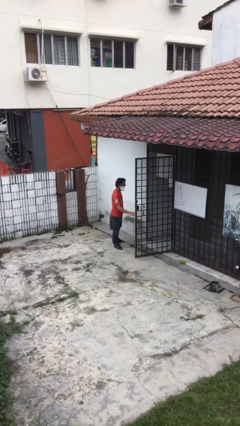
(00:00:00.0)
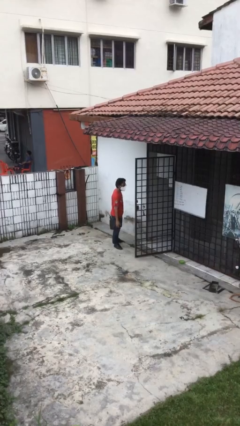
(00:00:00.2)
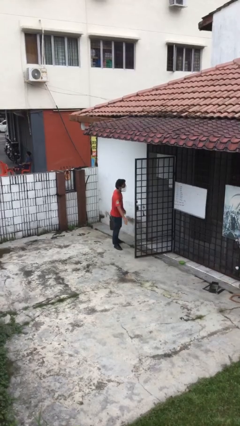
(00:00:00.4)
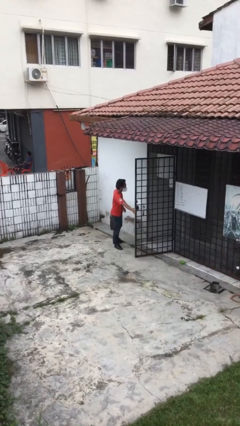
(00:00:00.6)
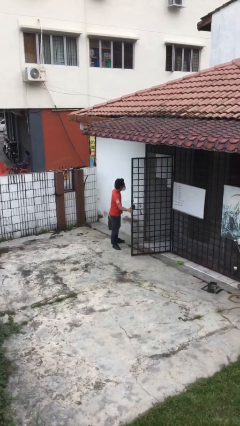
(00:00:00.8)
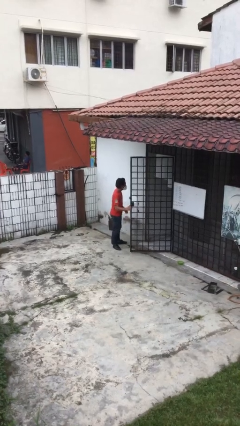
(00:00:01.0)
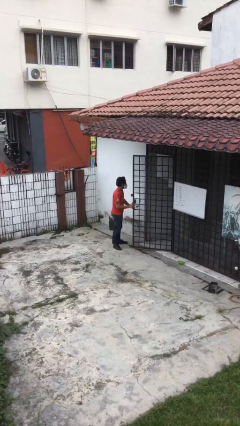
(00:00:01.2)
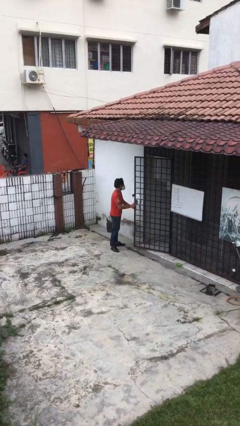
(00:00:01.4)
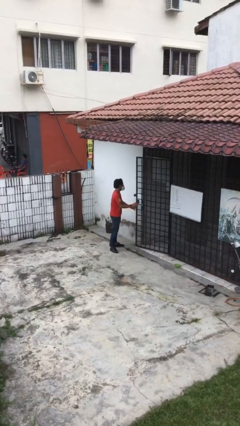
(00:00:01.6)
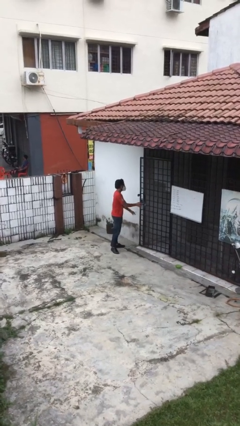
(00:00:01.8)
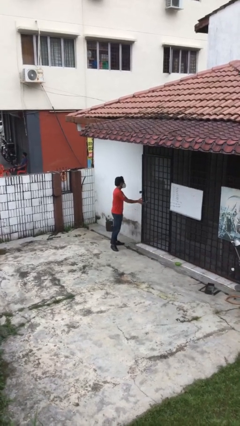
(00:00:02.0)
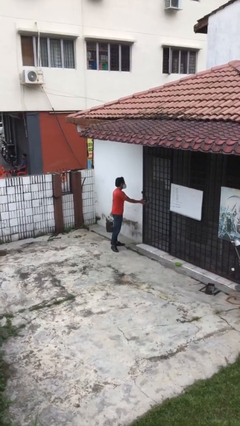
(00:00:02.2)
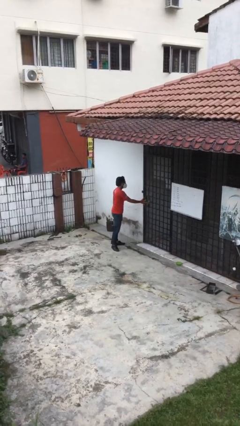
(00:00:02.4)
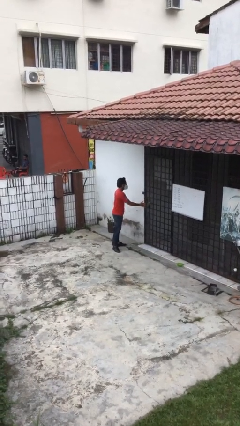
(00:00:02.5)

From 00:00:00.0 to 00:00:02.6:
person closes facility door

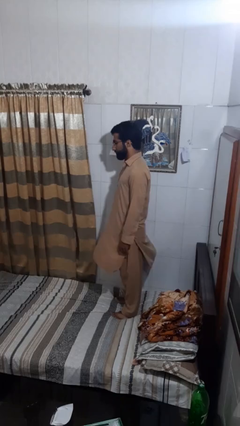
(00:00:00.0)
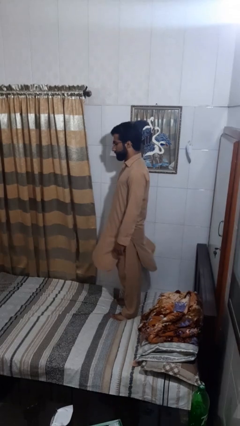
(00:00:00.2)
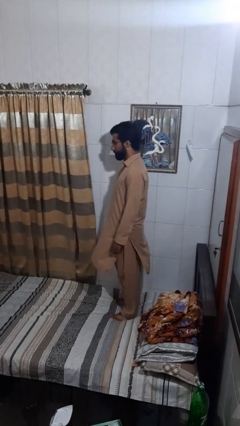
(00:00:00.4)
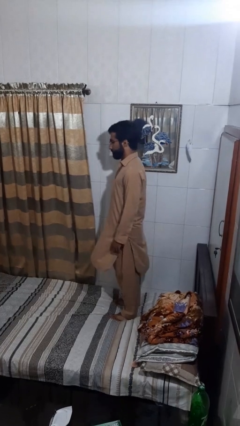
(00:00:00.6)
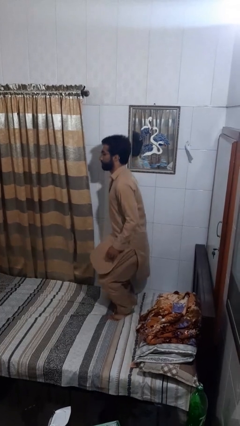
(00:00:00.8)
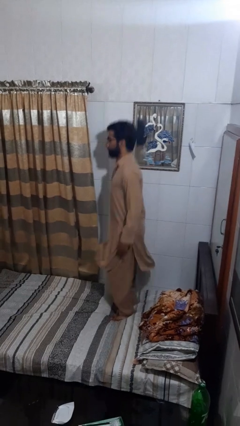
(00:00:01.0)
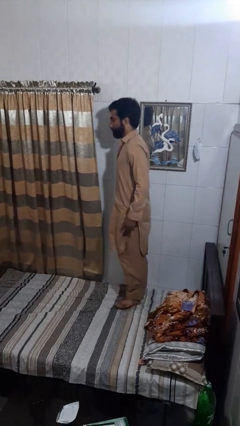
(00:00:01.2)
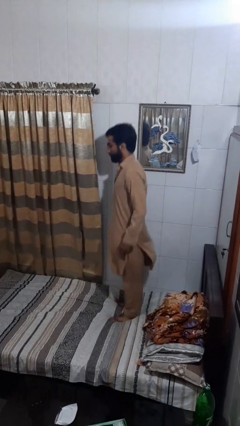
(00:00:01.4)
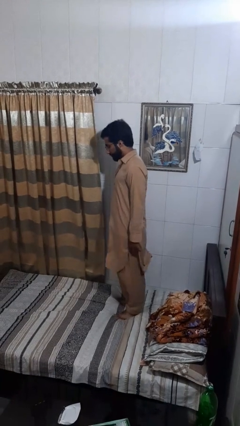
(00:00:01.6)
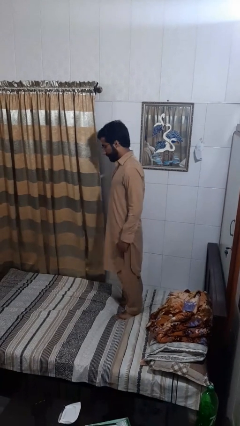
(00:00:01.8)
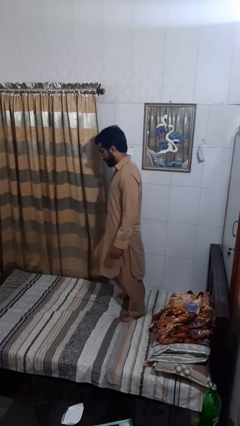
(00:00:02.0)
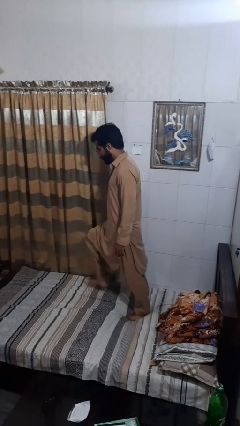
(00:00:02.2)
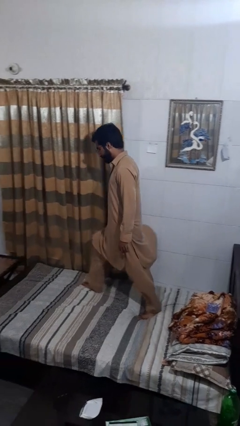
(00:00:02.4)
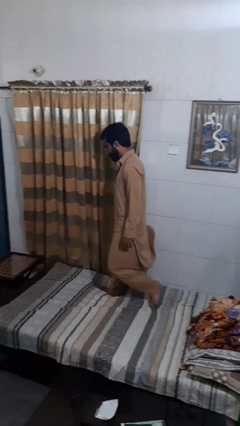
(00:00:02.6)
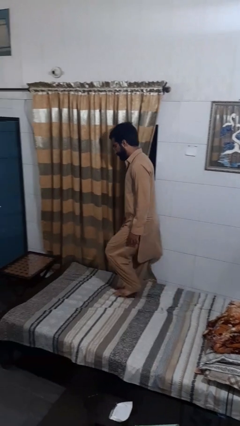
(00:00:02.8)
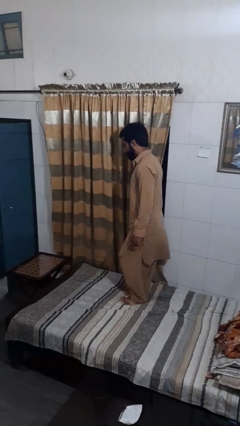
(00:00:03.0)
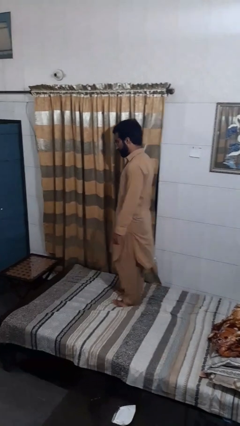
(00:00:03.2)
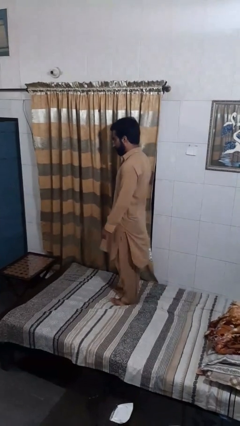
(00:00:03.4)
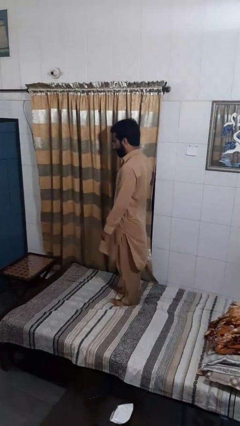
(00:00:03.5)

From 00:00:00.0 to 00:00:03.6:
person jumps on bed

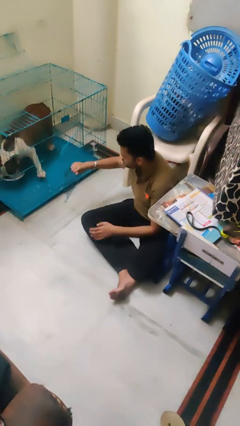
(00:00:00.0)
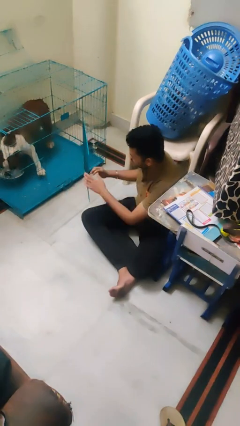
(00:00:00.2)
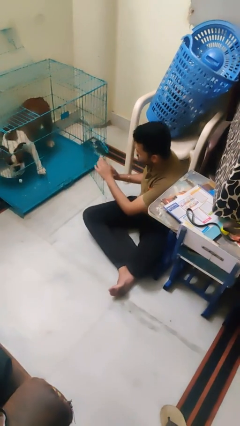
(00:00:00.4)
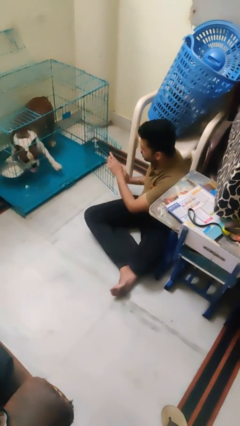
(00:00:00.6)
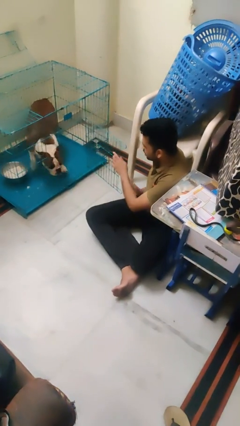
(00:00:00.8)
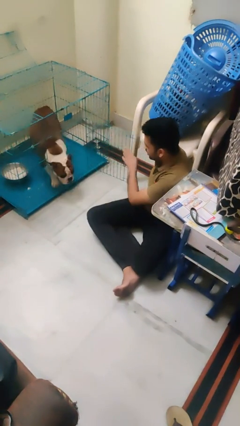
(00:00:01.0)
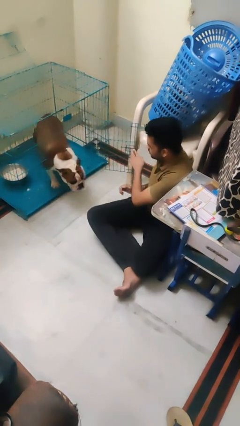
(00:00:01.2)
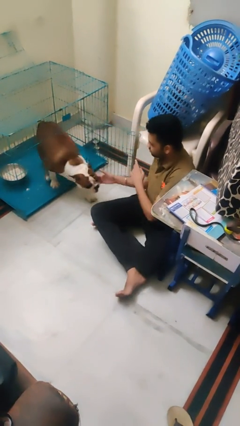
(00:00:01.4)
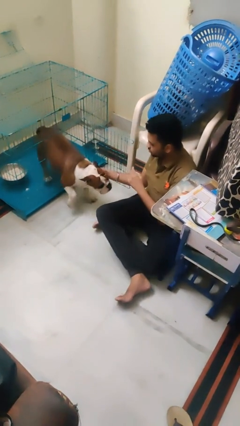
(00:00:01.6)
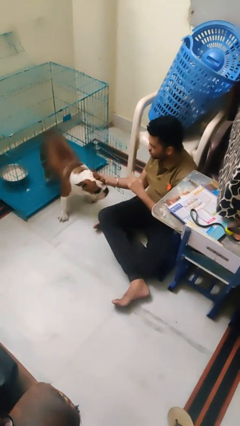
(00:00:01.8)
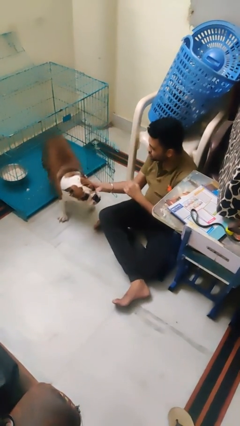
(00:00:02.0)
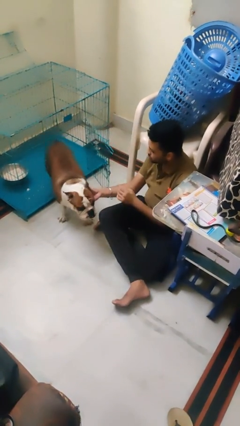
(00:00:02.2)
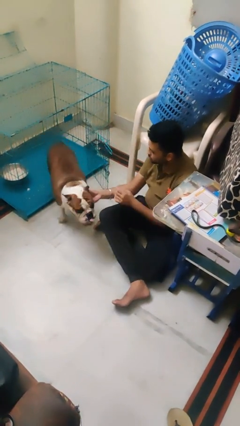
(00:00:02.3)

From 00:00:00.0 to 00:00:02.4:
person uncrates dog

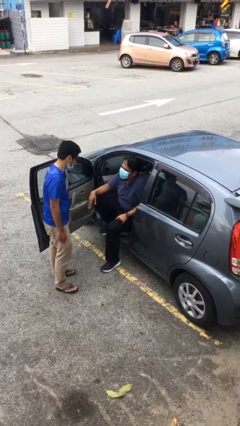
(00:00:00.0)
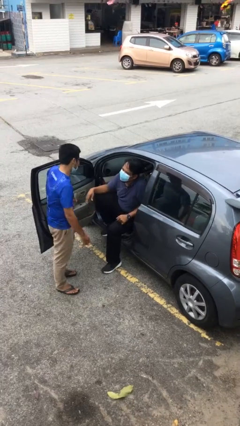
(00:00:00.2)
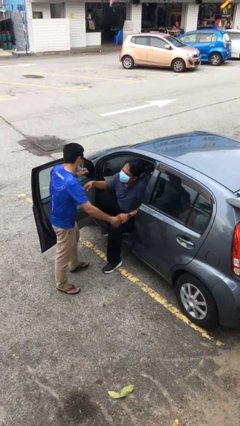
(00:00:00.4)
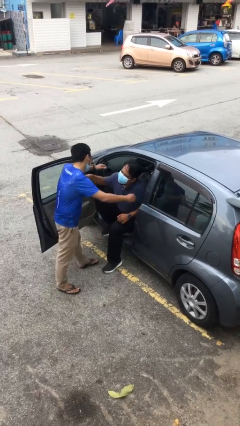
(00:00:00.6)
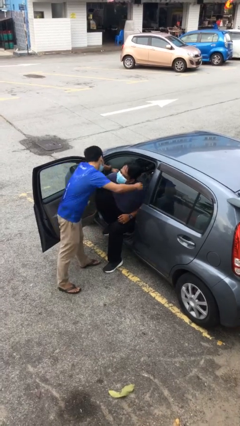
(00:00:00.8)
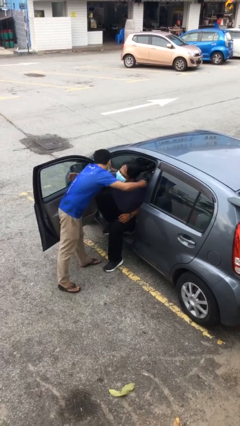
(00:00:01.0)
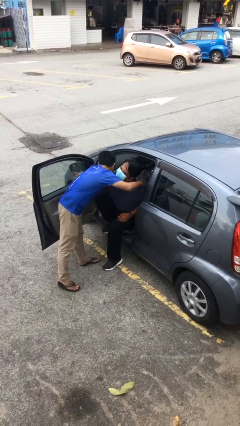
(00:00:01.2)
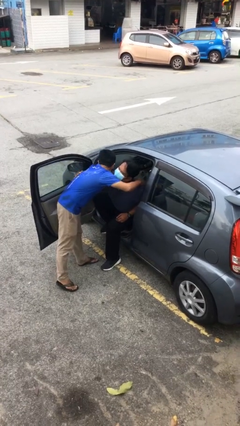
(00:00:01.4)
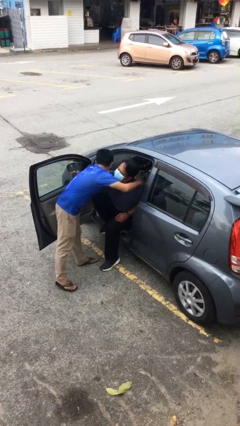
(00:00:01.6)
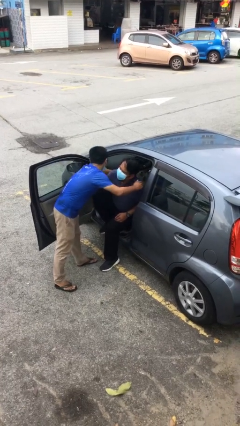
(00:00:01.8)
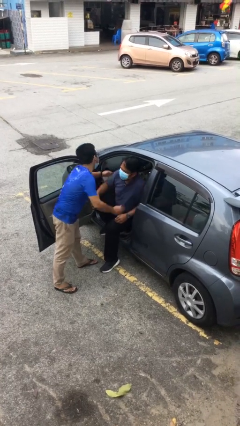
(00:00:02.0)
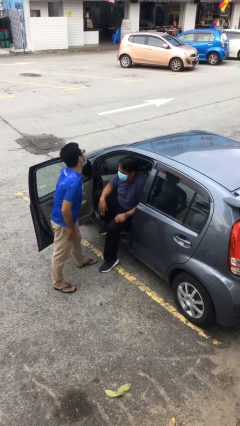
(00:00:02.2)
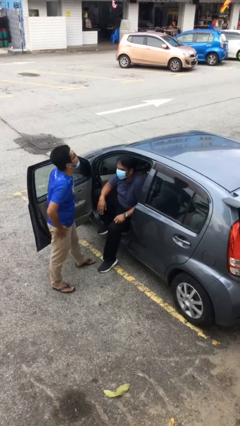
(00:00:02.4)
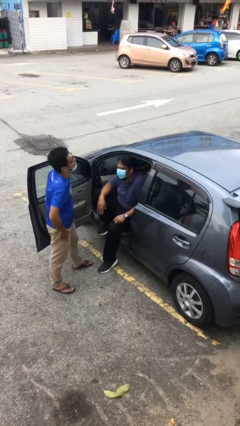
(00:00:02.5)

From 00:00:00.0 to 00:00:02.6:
person embraces person

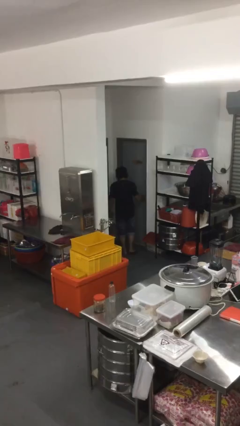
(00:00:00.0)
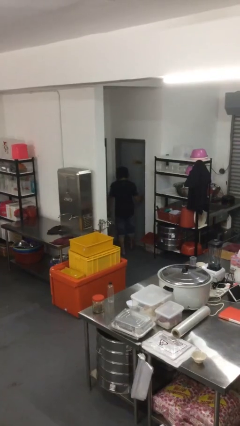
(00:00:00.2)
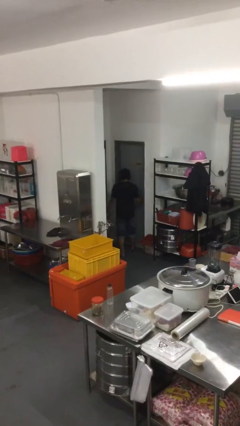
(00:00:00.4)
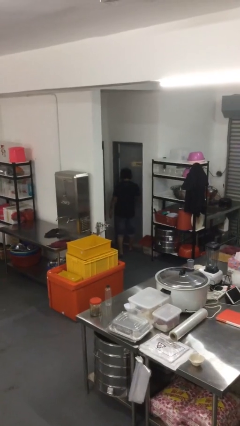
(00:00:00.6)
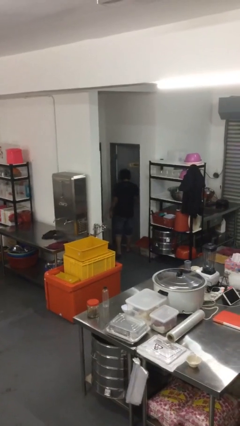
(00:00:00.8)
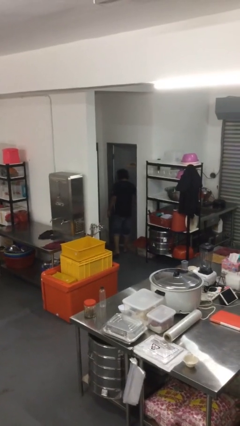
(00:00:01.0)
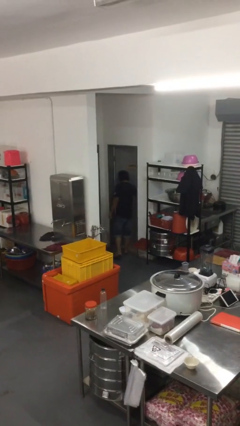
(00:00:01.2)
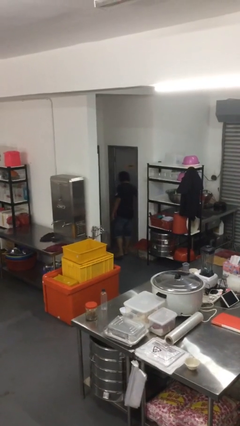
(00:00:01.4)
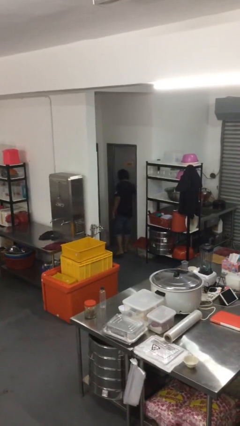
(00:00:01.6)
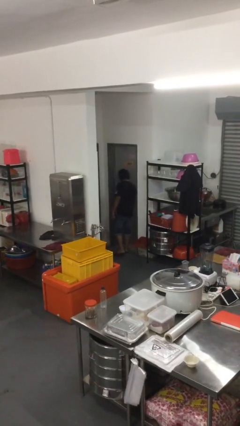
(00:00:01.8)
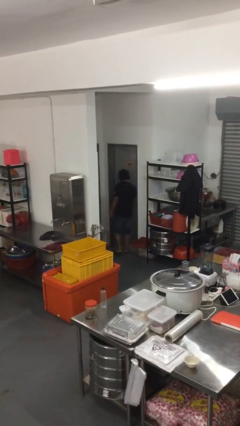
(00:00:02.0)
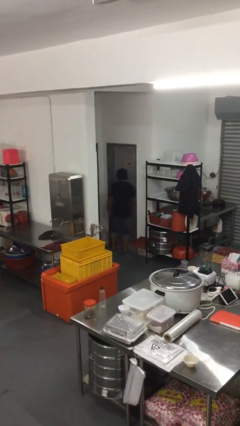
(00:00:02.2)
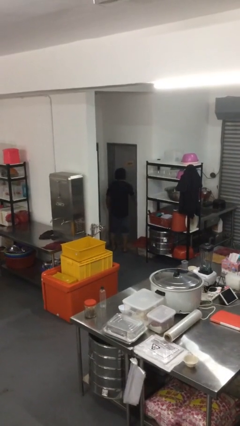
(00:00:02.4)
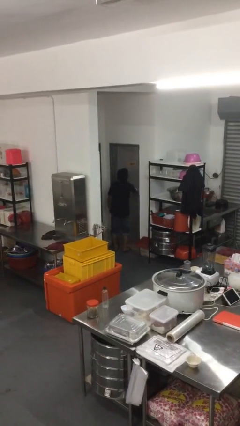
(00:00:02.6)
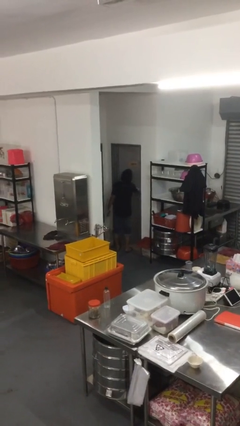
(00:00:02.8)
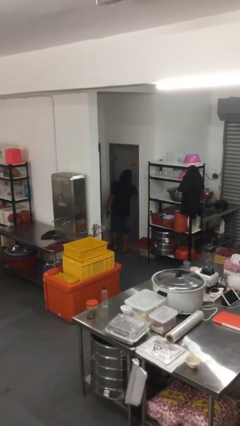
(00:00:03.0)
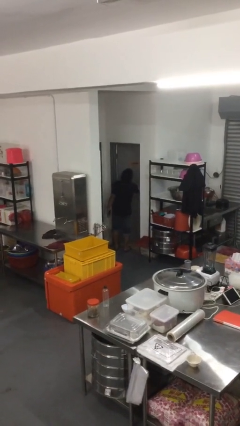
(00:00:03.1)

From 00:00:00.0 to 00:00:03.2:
person opens facility door

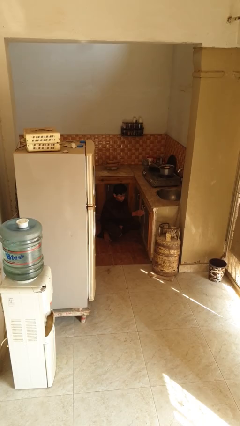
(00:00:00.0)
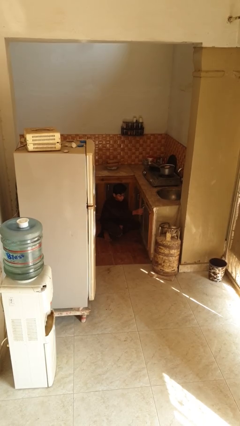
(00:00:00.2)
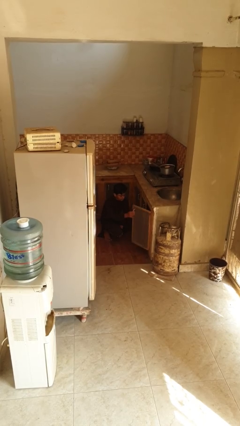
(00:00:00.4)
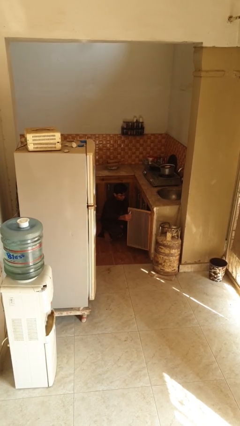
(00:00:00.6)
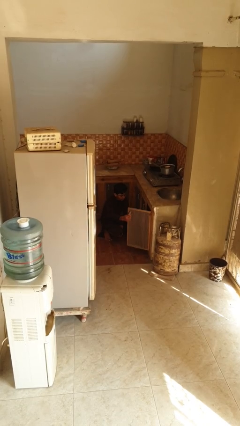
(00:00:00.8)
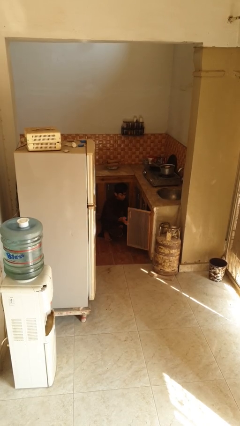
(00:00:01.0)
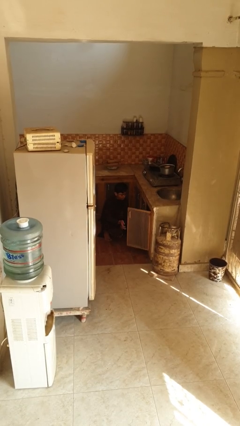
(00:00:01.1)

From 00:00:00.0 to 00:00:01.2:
person opens kitchen drawer

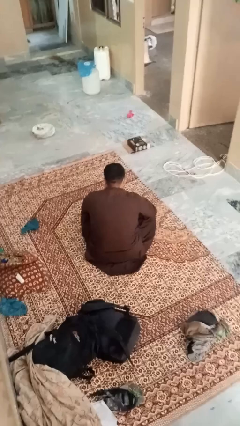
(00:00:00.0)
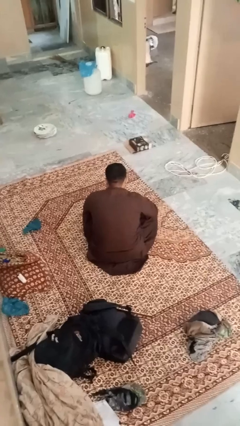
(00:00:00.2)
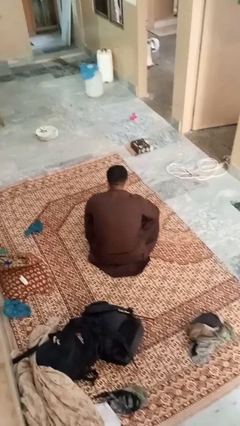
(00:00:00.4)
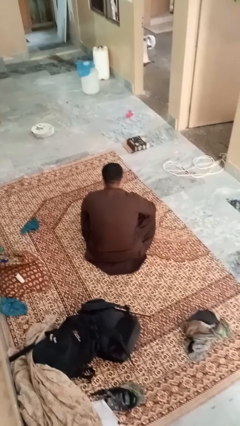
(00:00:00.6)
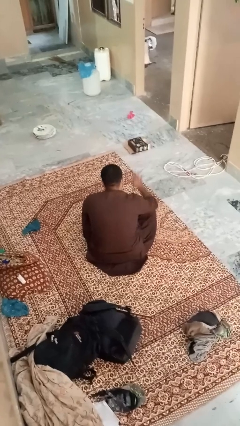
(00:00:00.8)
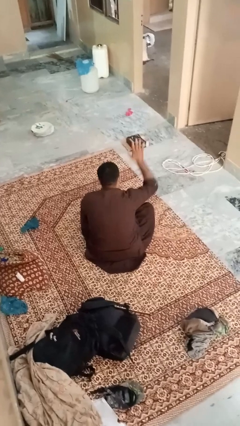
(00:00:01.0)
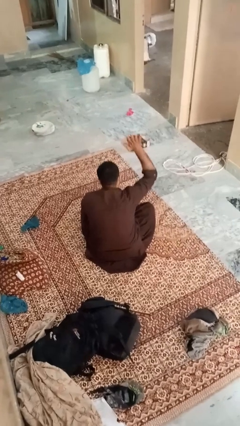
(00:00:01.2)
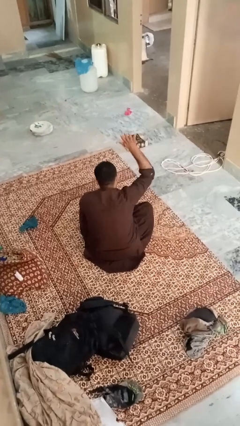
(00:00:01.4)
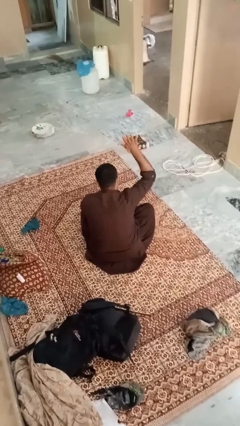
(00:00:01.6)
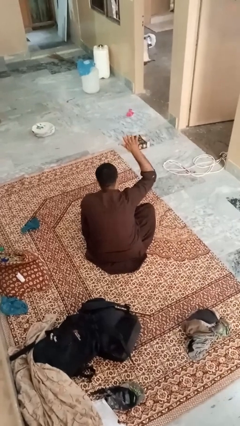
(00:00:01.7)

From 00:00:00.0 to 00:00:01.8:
person gestures number five
